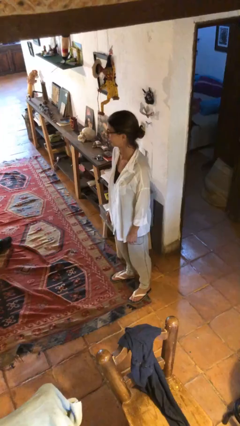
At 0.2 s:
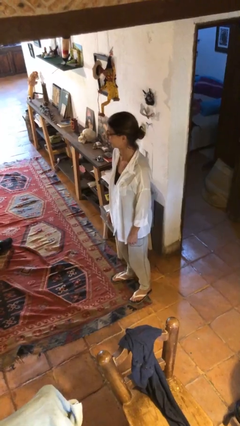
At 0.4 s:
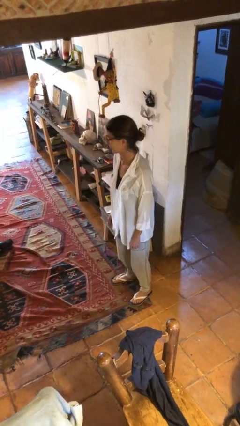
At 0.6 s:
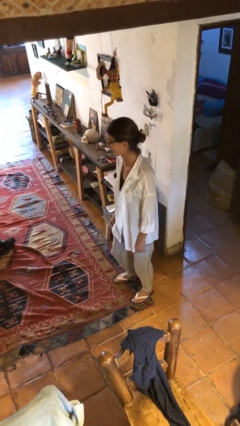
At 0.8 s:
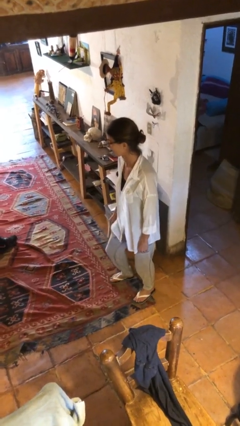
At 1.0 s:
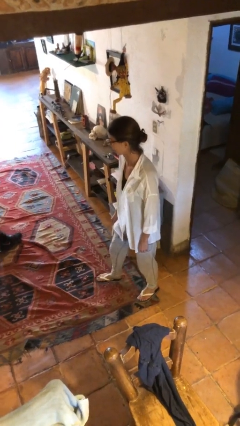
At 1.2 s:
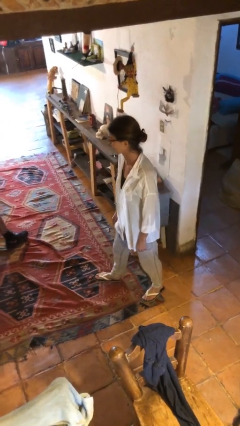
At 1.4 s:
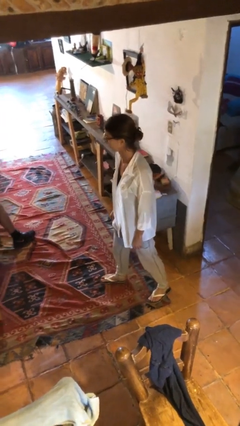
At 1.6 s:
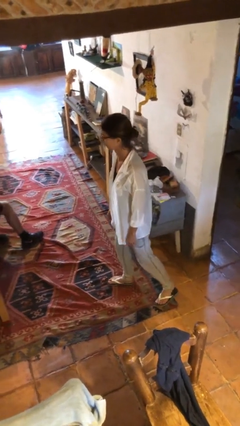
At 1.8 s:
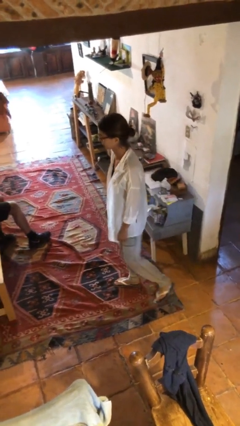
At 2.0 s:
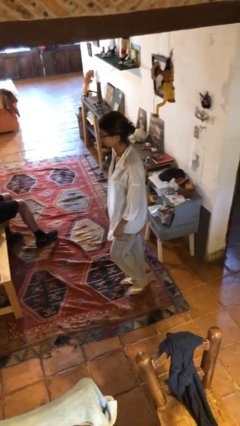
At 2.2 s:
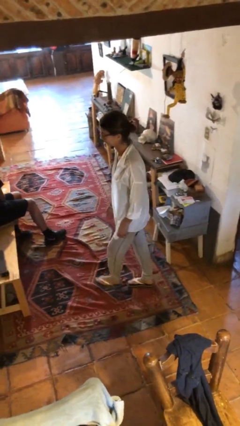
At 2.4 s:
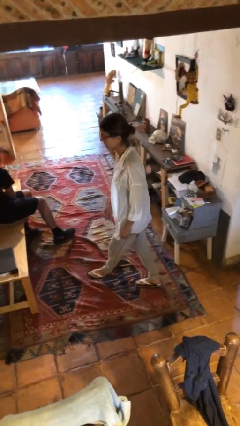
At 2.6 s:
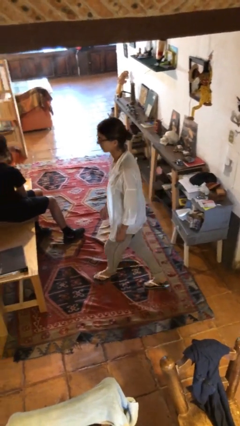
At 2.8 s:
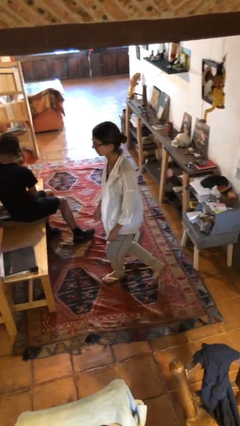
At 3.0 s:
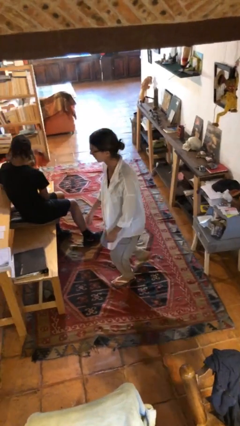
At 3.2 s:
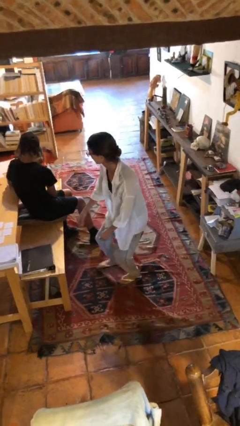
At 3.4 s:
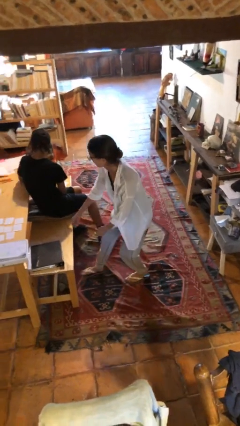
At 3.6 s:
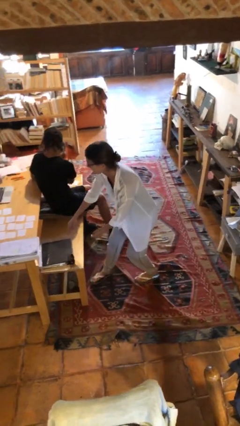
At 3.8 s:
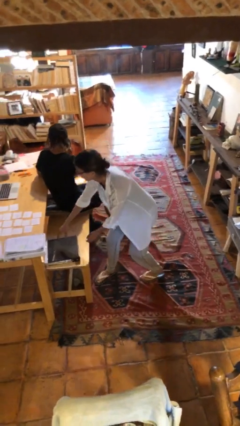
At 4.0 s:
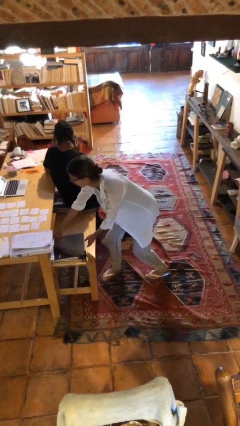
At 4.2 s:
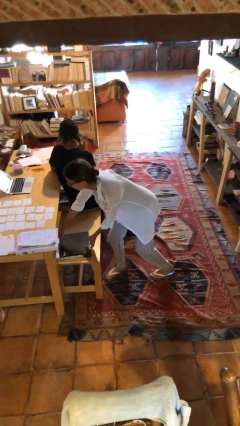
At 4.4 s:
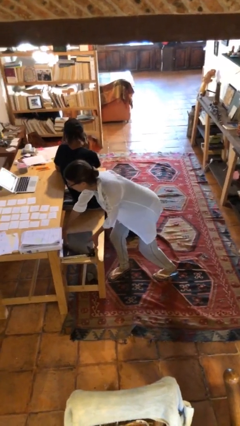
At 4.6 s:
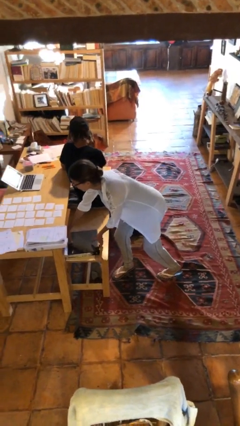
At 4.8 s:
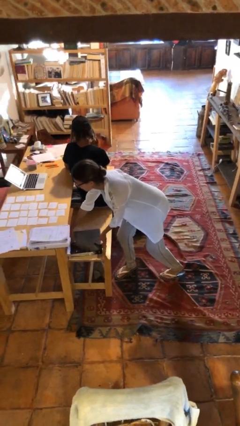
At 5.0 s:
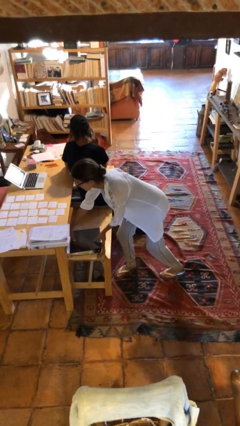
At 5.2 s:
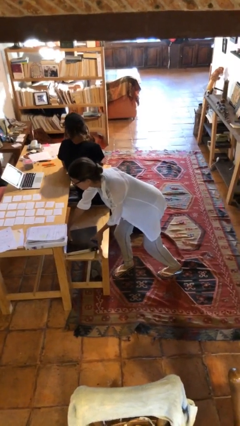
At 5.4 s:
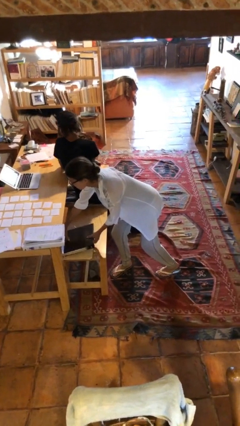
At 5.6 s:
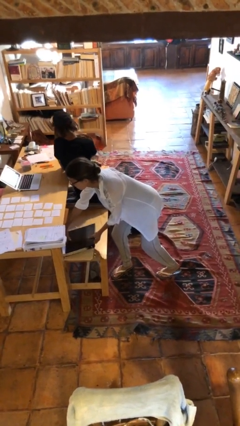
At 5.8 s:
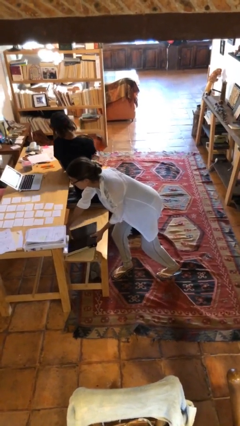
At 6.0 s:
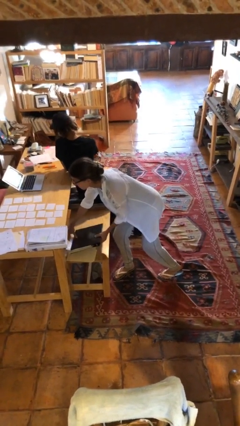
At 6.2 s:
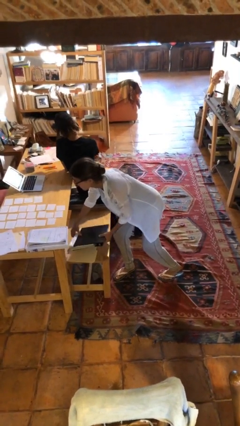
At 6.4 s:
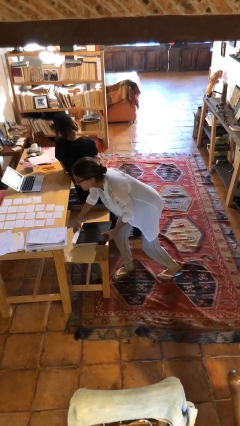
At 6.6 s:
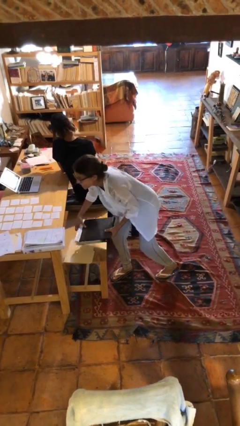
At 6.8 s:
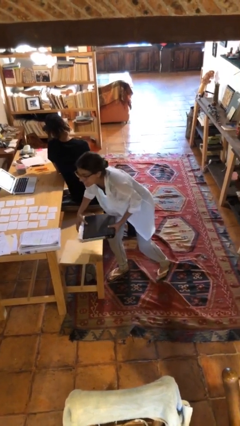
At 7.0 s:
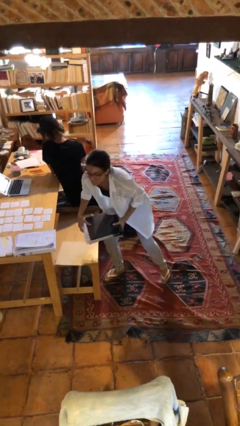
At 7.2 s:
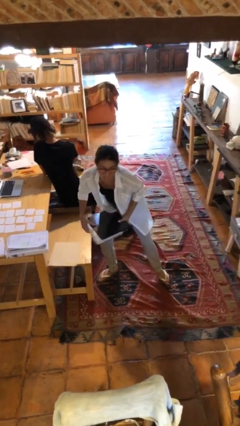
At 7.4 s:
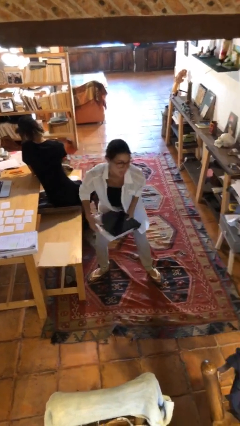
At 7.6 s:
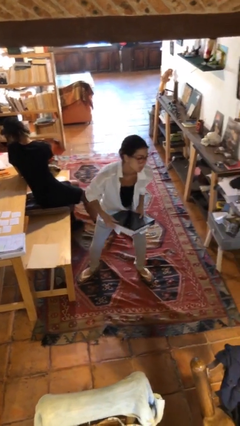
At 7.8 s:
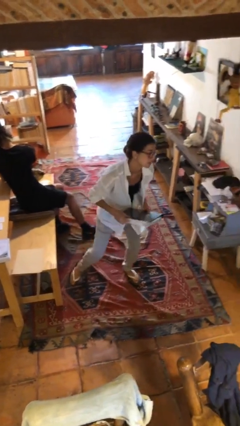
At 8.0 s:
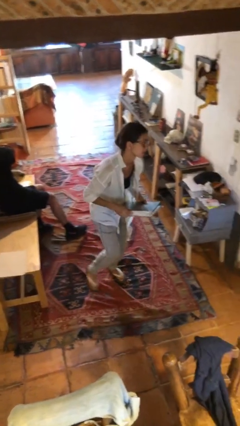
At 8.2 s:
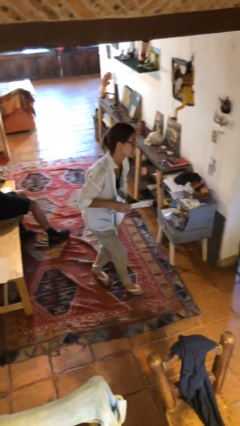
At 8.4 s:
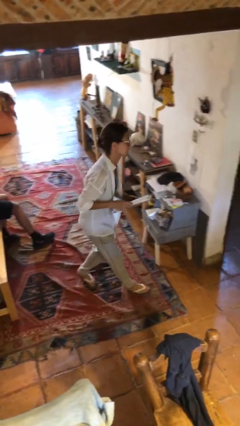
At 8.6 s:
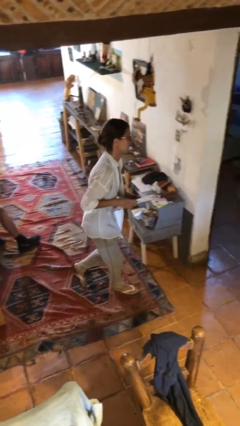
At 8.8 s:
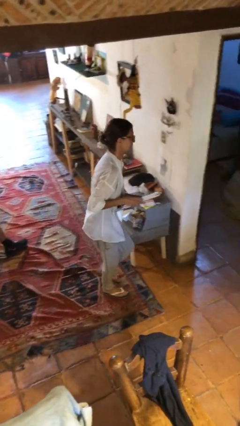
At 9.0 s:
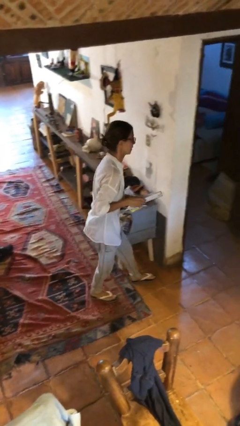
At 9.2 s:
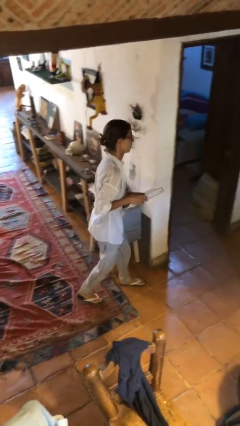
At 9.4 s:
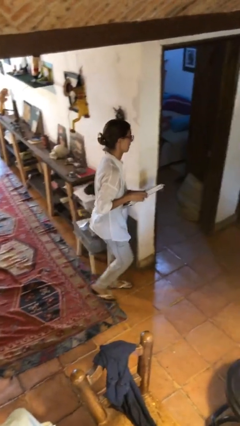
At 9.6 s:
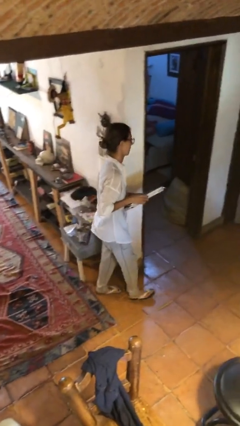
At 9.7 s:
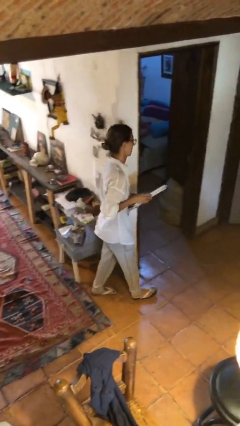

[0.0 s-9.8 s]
person steals object from person

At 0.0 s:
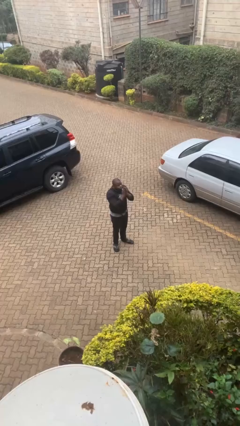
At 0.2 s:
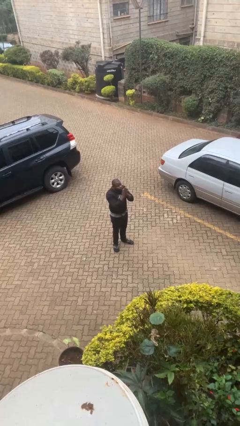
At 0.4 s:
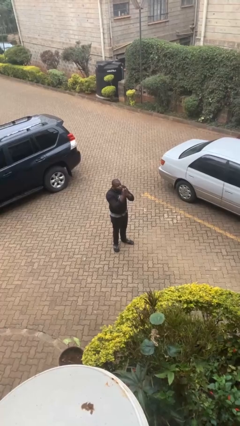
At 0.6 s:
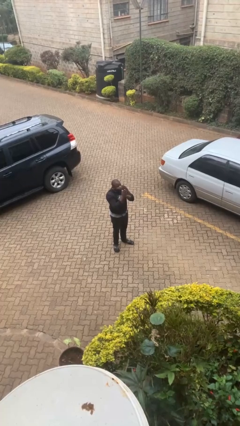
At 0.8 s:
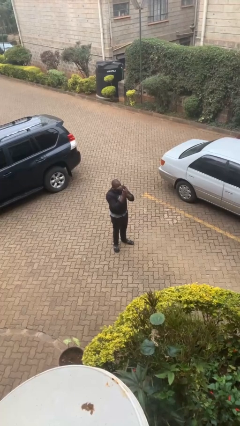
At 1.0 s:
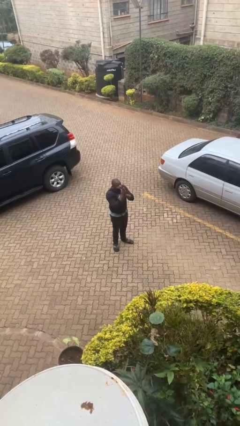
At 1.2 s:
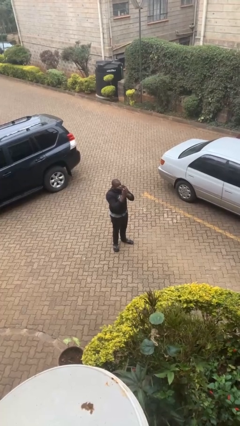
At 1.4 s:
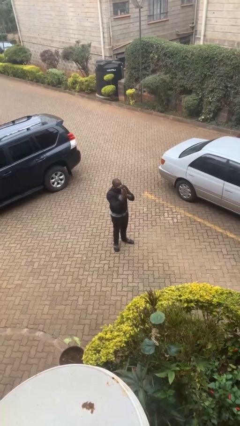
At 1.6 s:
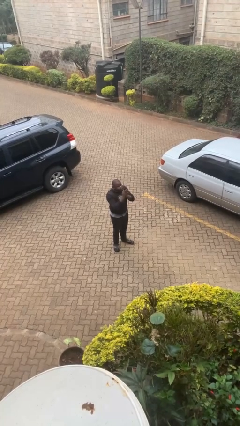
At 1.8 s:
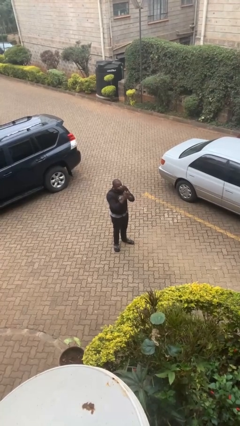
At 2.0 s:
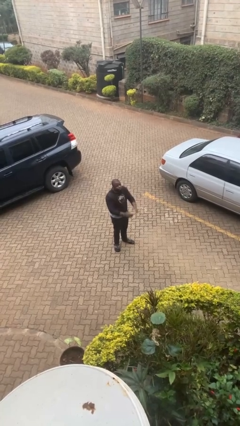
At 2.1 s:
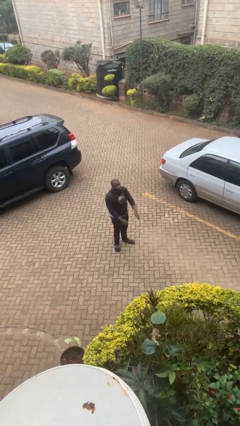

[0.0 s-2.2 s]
person blows into hands

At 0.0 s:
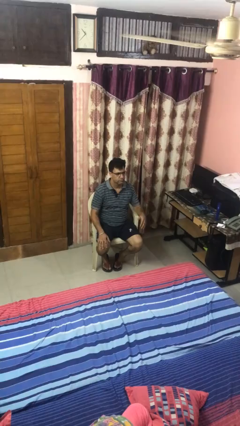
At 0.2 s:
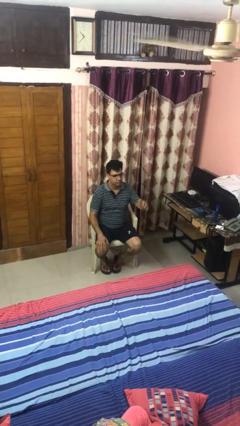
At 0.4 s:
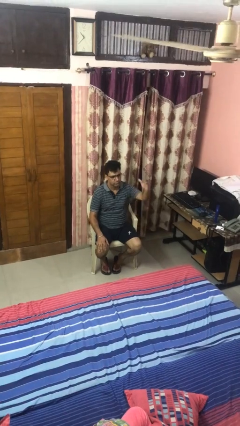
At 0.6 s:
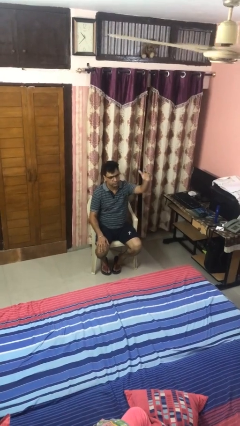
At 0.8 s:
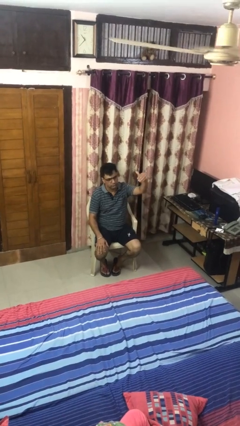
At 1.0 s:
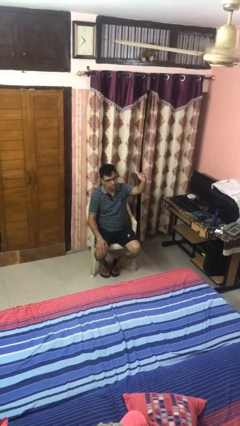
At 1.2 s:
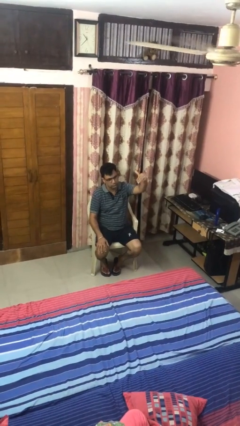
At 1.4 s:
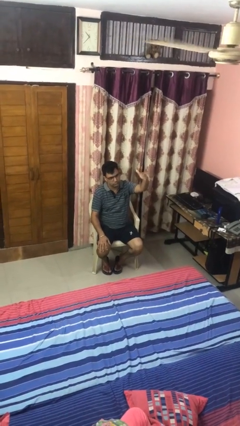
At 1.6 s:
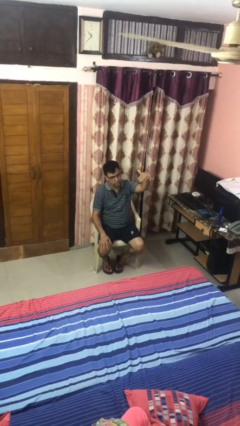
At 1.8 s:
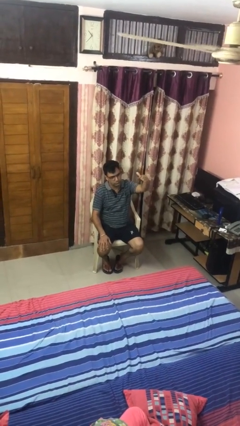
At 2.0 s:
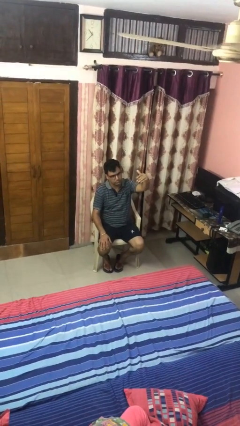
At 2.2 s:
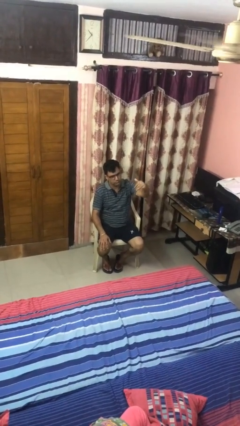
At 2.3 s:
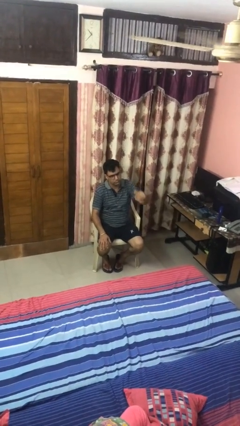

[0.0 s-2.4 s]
person gestures come here

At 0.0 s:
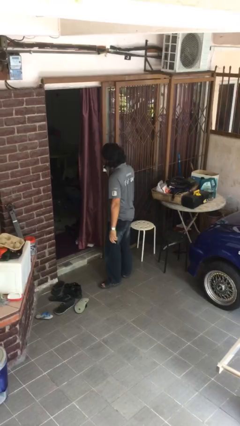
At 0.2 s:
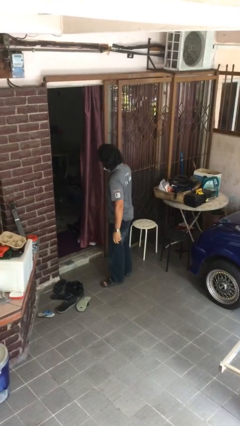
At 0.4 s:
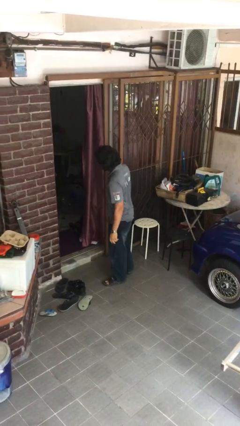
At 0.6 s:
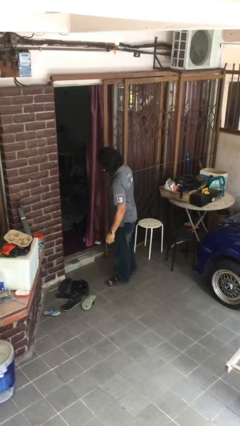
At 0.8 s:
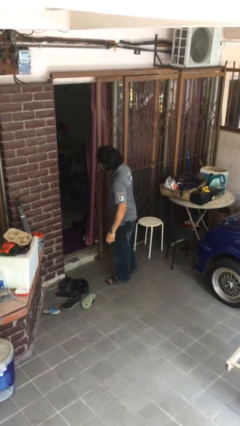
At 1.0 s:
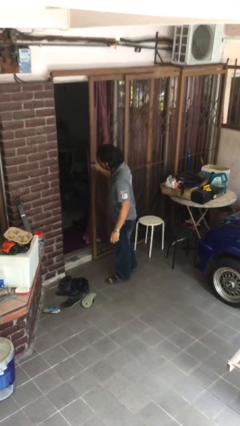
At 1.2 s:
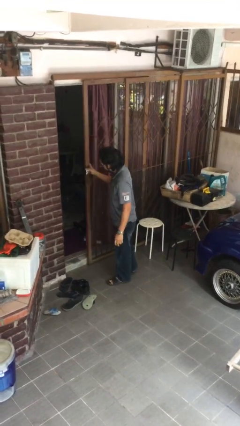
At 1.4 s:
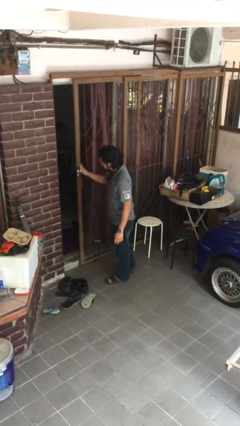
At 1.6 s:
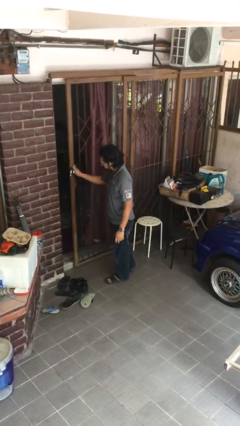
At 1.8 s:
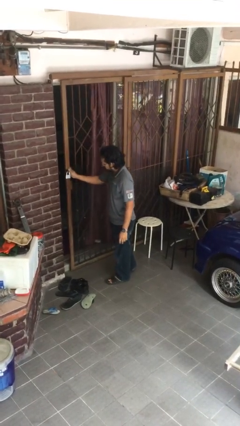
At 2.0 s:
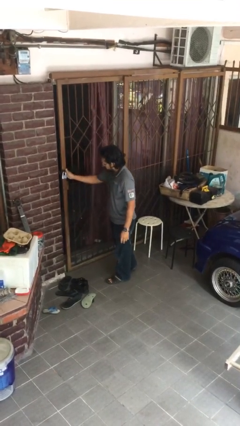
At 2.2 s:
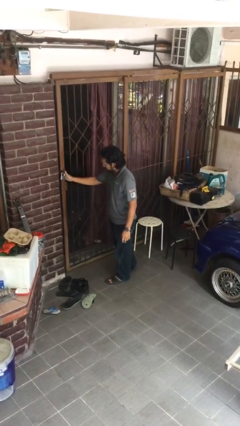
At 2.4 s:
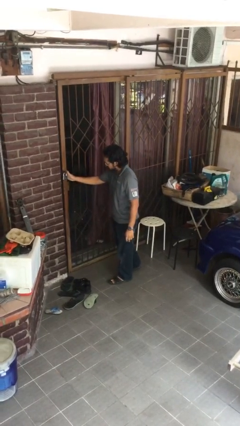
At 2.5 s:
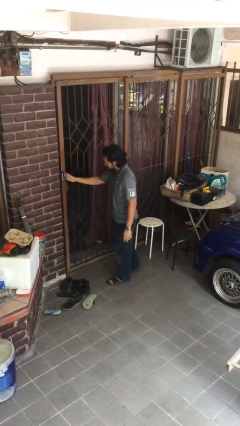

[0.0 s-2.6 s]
person closes facility door

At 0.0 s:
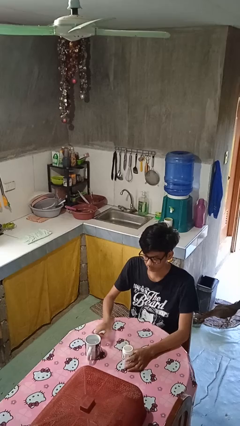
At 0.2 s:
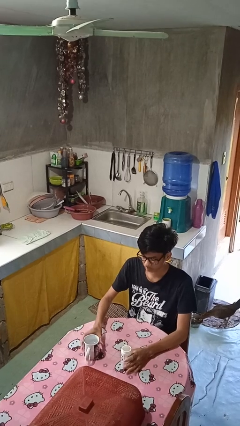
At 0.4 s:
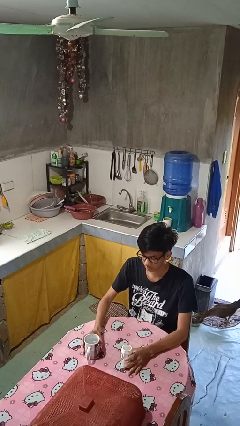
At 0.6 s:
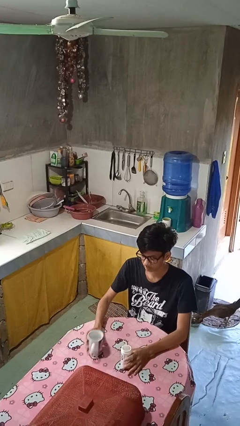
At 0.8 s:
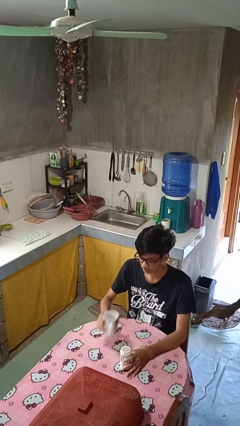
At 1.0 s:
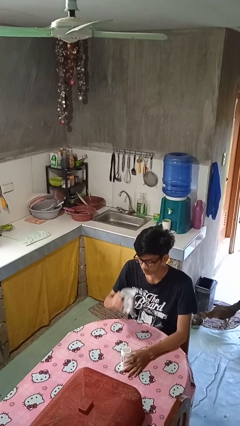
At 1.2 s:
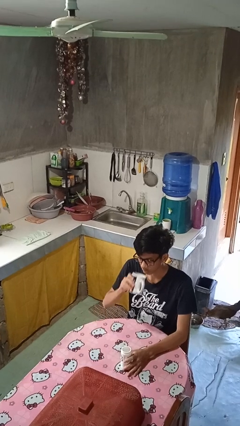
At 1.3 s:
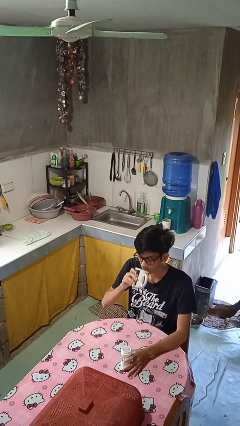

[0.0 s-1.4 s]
person drinks from cup
